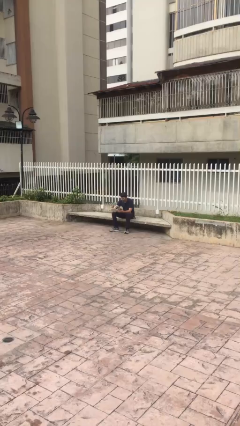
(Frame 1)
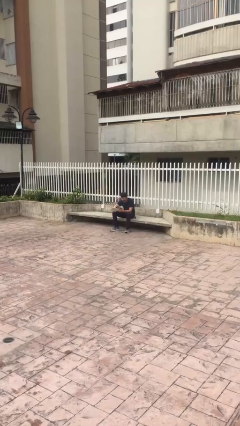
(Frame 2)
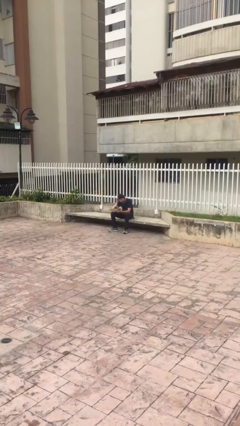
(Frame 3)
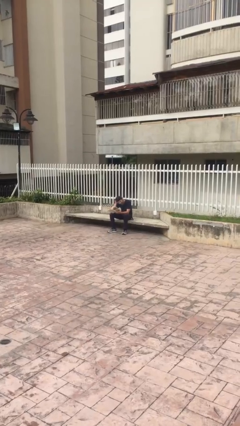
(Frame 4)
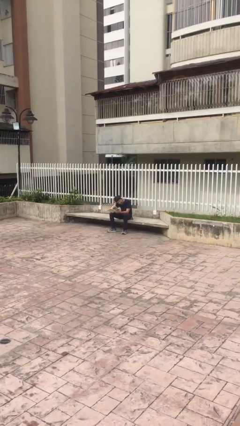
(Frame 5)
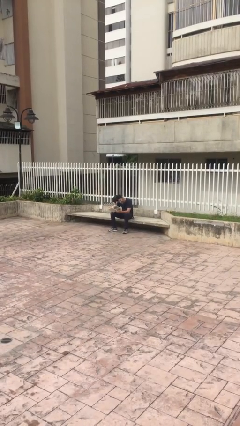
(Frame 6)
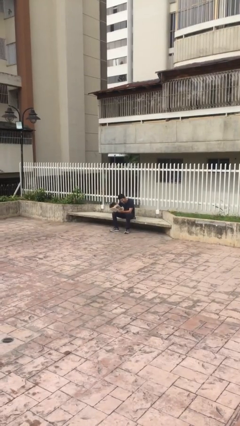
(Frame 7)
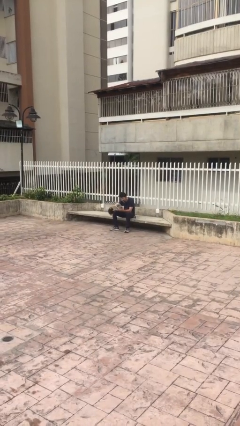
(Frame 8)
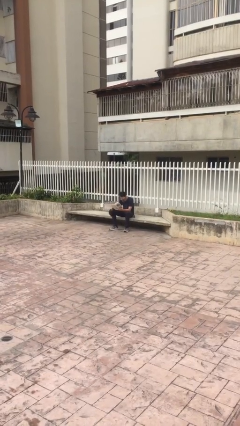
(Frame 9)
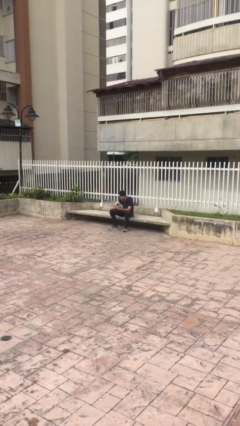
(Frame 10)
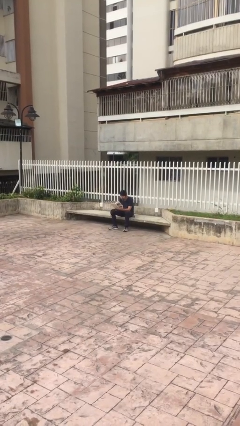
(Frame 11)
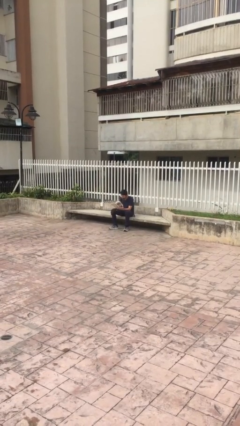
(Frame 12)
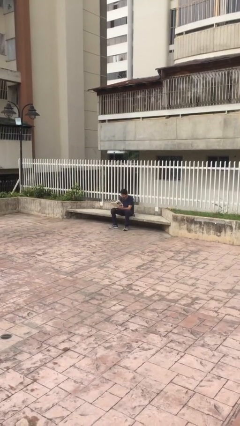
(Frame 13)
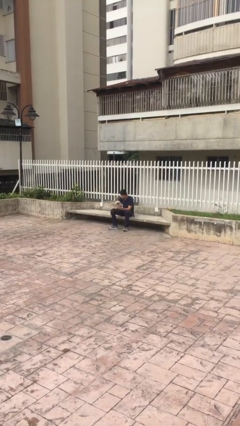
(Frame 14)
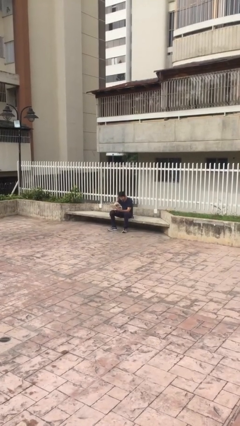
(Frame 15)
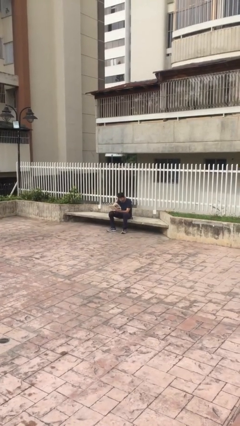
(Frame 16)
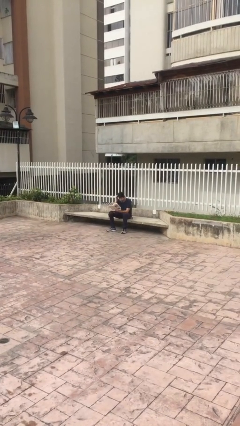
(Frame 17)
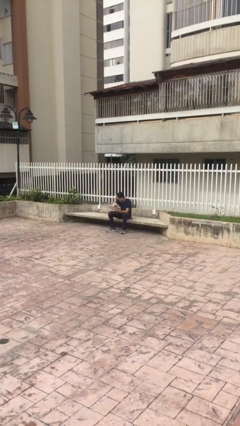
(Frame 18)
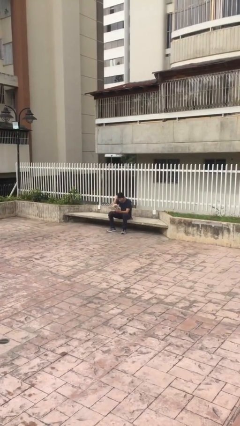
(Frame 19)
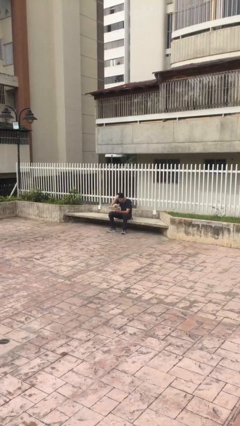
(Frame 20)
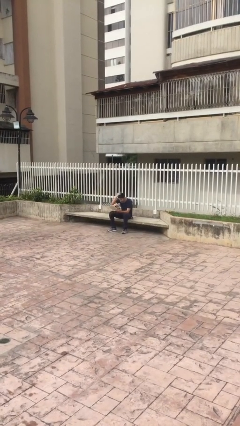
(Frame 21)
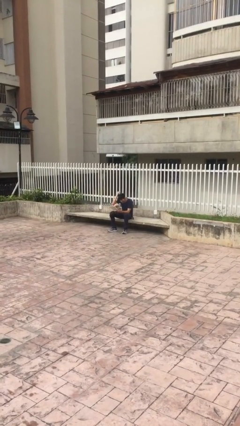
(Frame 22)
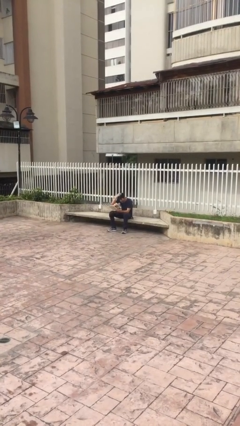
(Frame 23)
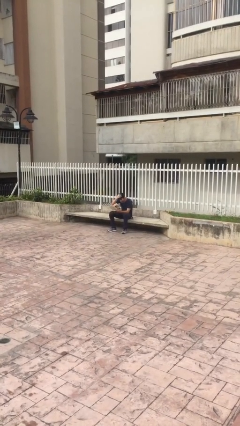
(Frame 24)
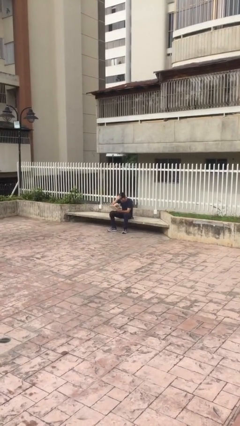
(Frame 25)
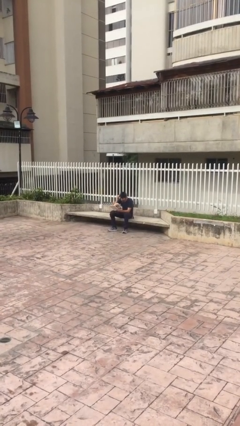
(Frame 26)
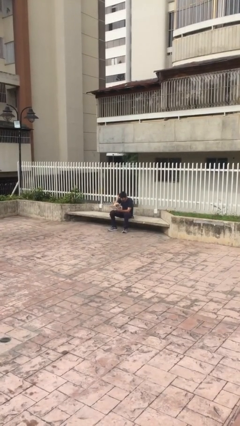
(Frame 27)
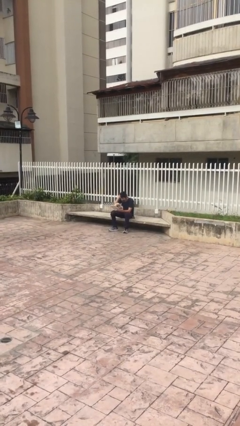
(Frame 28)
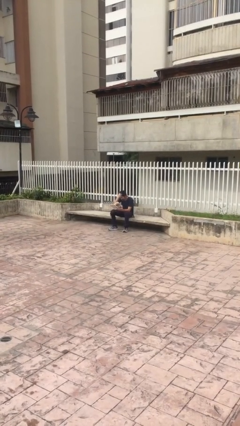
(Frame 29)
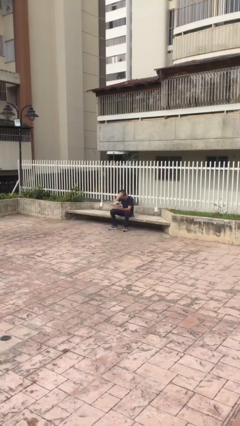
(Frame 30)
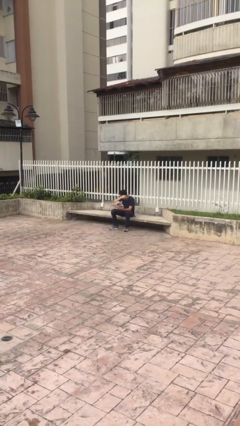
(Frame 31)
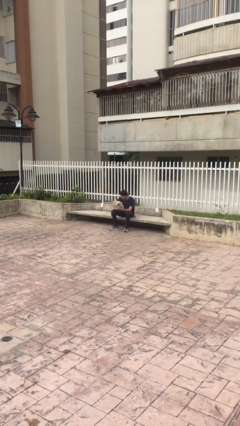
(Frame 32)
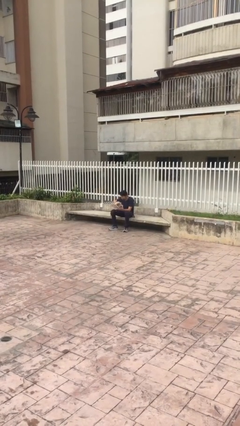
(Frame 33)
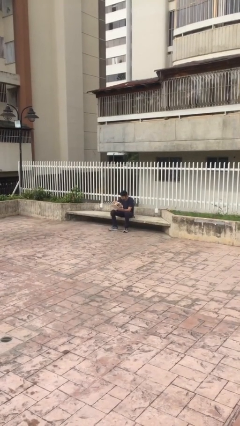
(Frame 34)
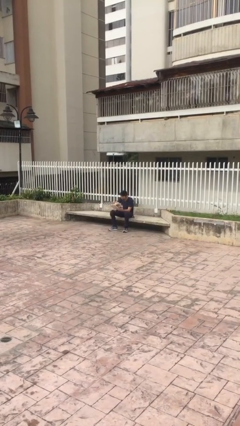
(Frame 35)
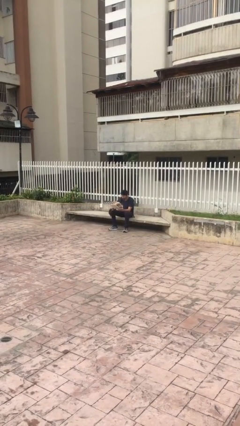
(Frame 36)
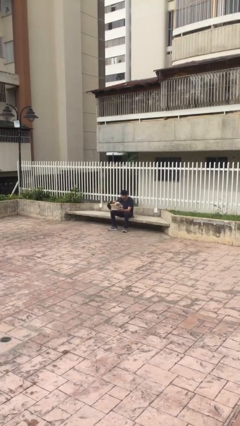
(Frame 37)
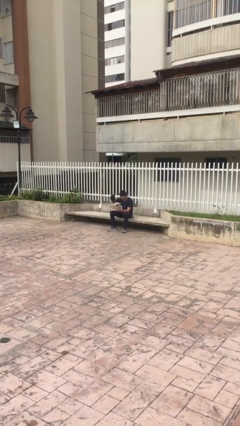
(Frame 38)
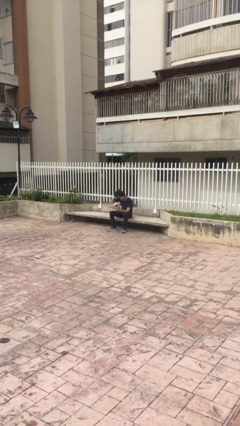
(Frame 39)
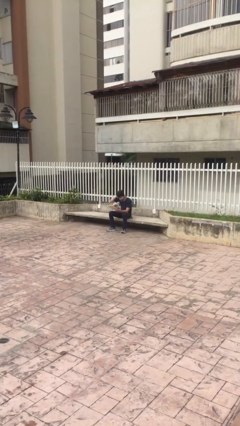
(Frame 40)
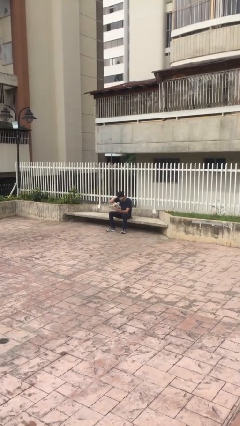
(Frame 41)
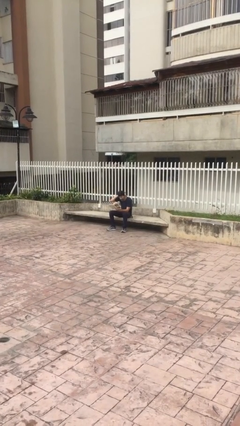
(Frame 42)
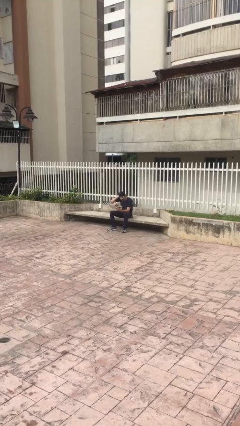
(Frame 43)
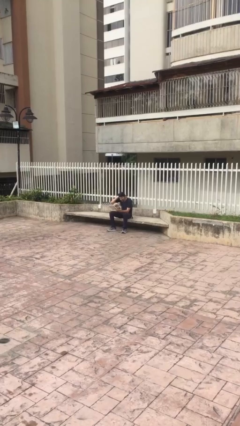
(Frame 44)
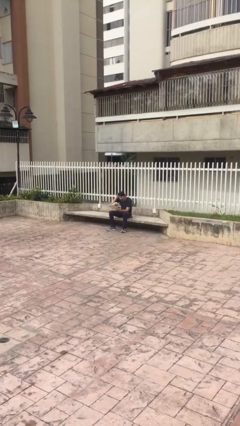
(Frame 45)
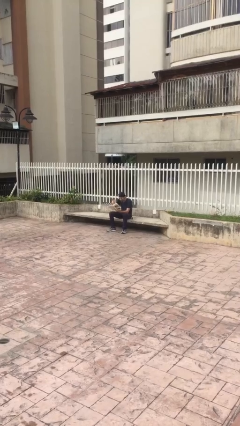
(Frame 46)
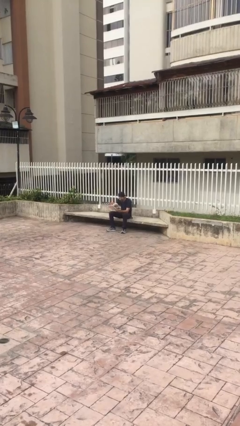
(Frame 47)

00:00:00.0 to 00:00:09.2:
person reads document

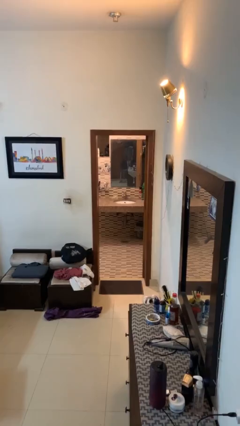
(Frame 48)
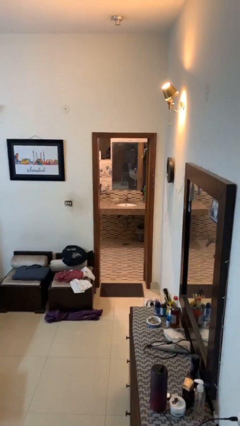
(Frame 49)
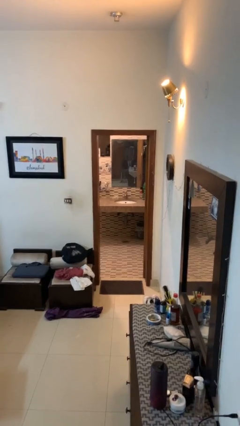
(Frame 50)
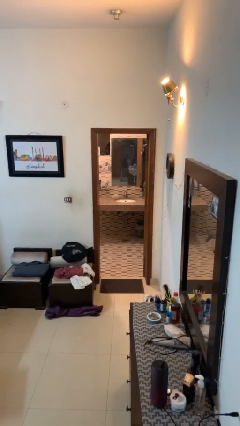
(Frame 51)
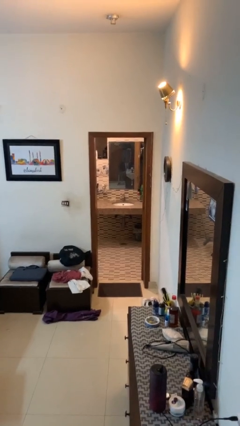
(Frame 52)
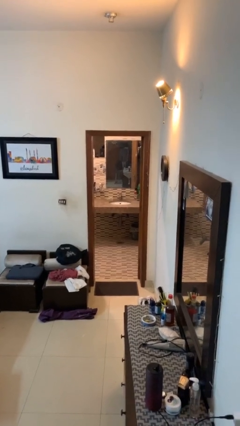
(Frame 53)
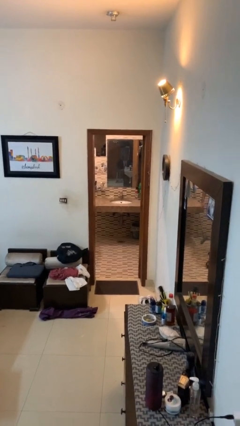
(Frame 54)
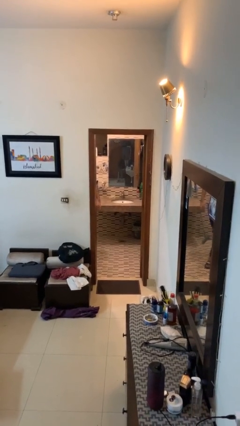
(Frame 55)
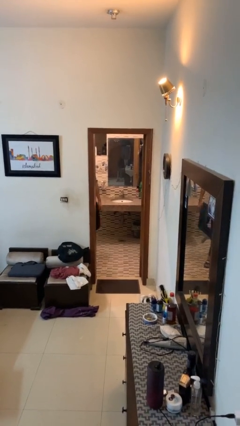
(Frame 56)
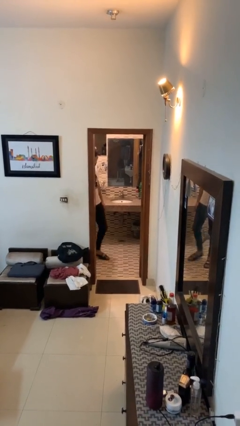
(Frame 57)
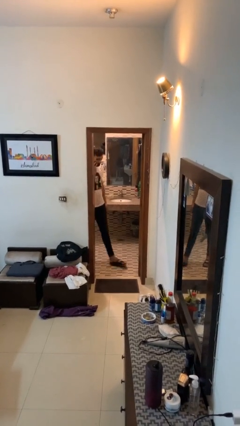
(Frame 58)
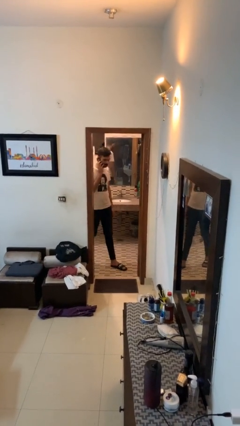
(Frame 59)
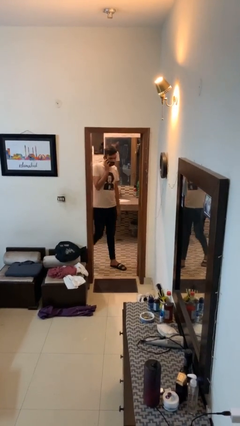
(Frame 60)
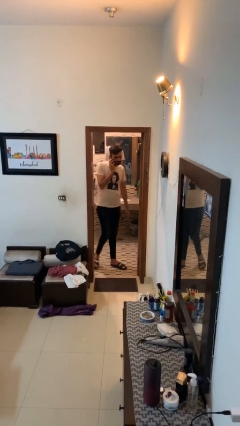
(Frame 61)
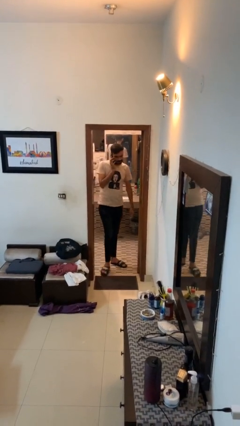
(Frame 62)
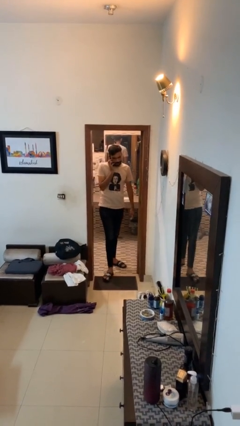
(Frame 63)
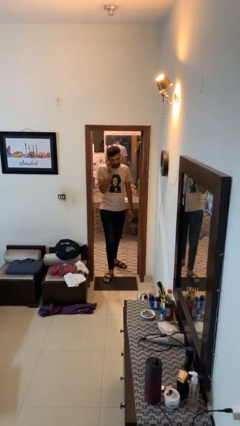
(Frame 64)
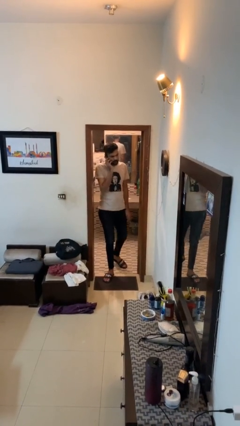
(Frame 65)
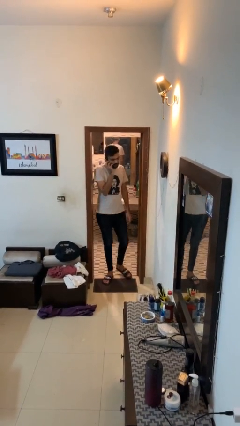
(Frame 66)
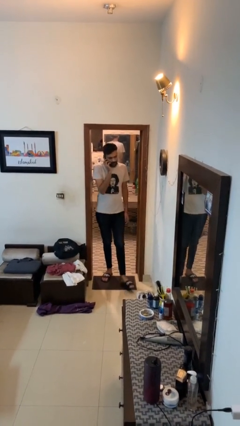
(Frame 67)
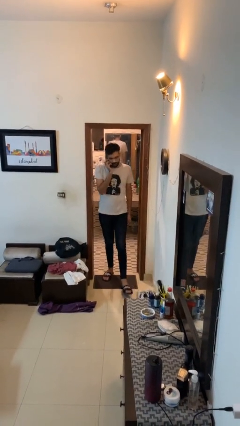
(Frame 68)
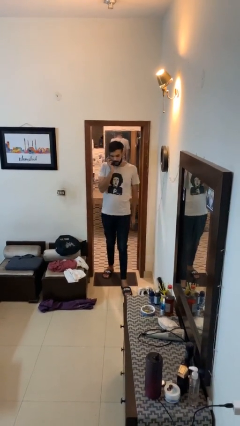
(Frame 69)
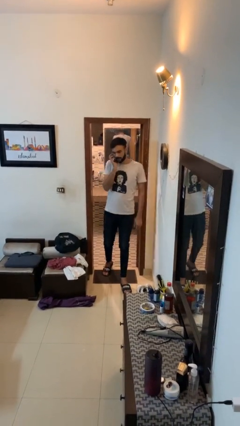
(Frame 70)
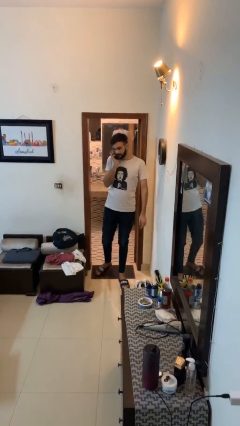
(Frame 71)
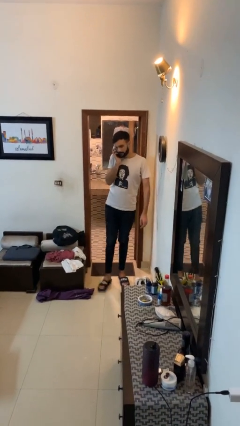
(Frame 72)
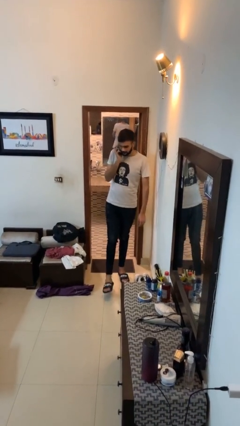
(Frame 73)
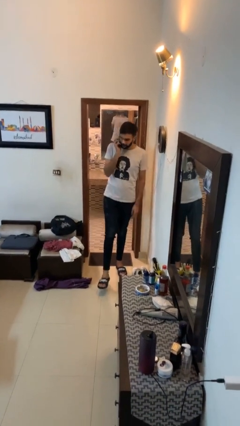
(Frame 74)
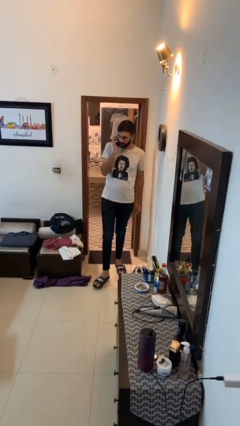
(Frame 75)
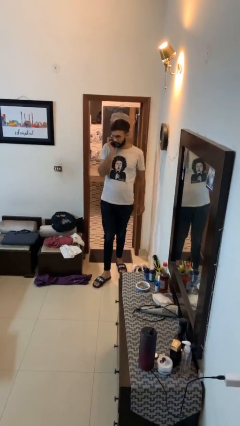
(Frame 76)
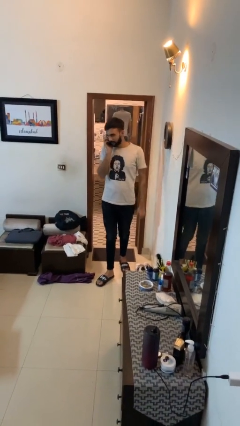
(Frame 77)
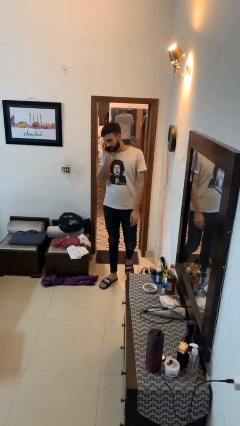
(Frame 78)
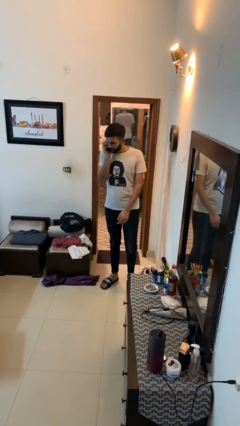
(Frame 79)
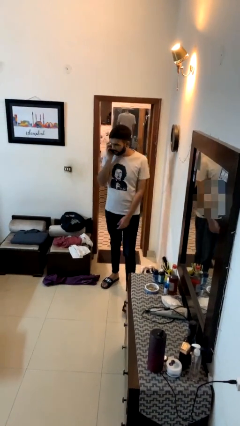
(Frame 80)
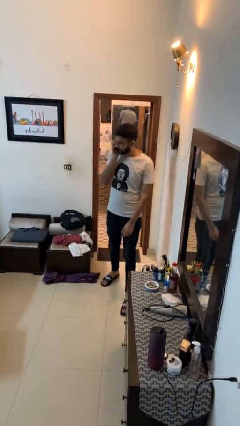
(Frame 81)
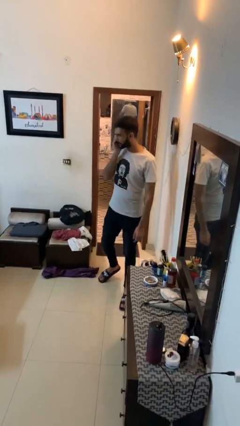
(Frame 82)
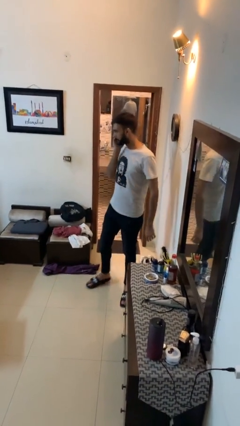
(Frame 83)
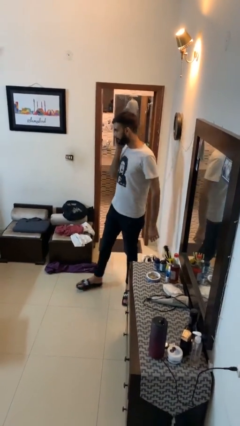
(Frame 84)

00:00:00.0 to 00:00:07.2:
person enters scene through structure

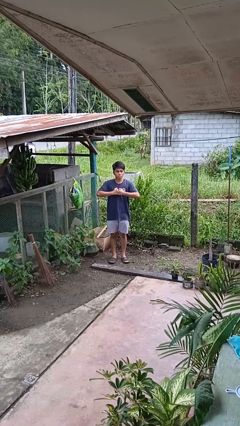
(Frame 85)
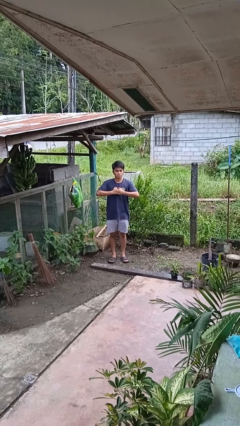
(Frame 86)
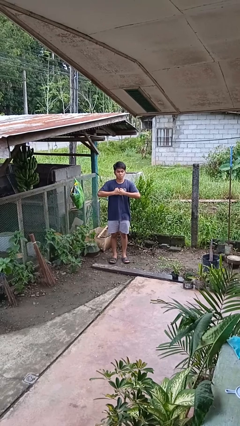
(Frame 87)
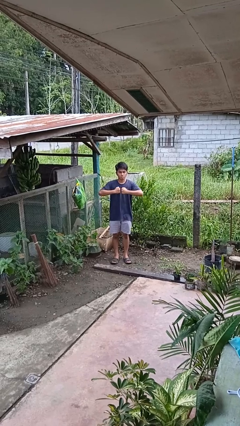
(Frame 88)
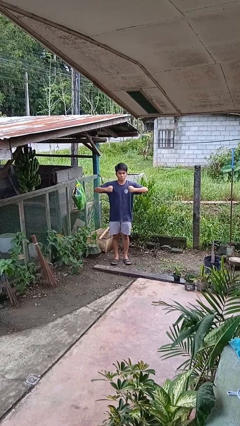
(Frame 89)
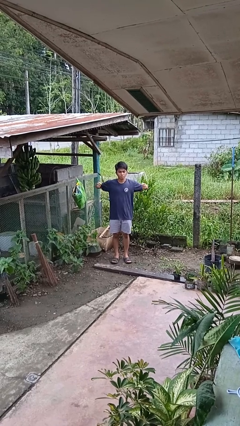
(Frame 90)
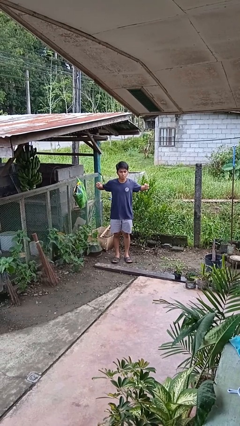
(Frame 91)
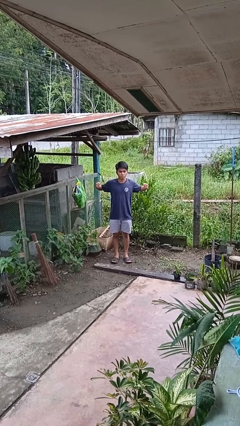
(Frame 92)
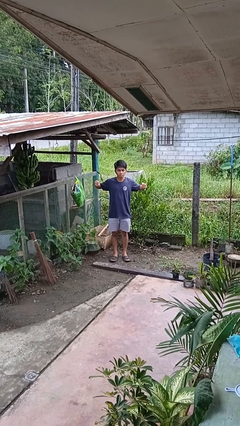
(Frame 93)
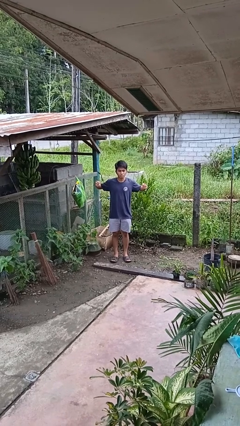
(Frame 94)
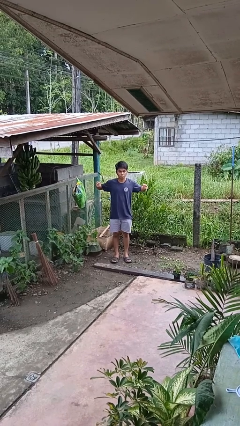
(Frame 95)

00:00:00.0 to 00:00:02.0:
person gestures zoom in
